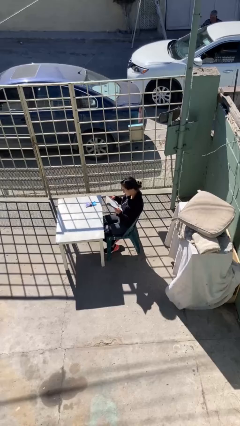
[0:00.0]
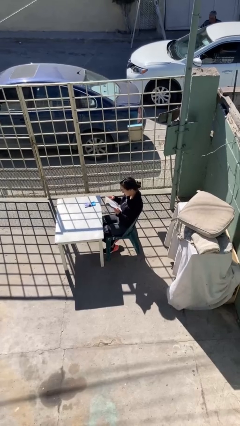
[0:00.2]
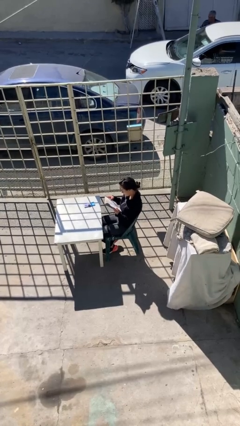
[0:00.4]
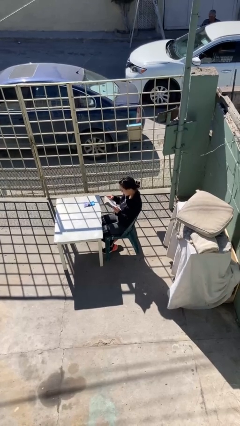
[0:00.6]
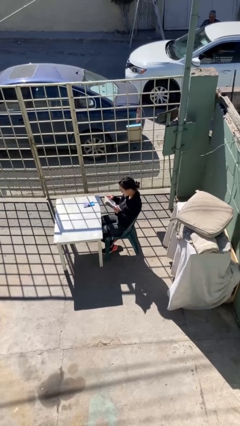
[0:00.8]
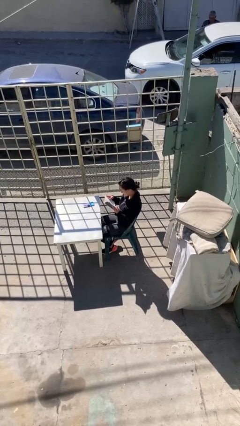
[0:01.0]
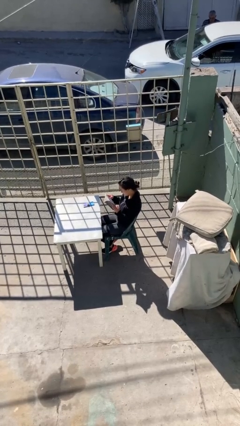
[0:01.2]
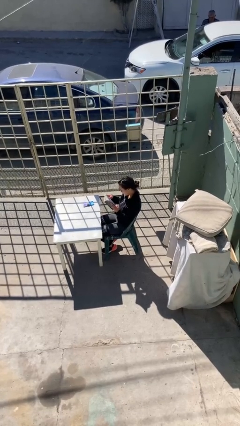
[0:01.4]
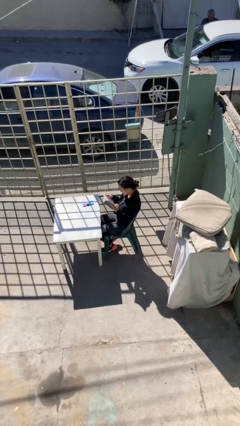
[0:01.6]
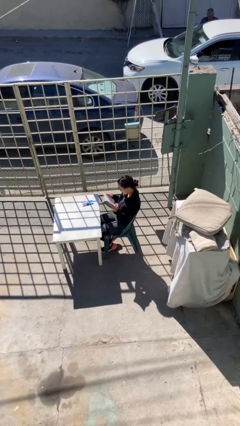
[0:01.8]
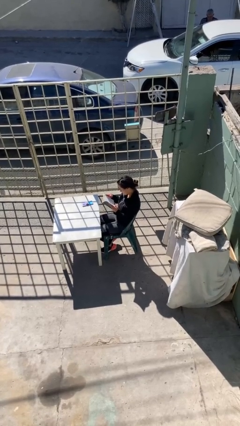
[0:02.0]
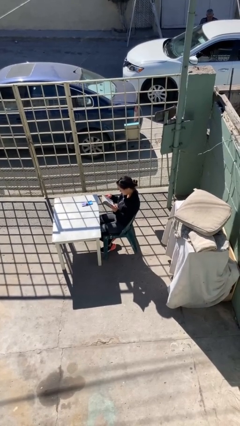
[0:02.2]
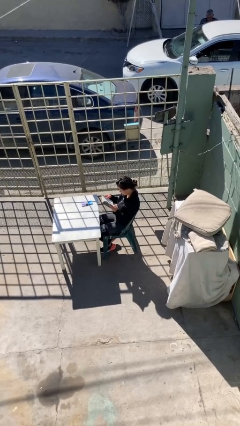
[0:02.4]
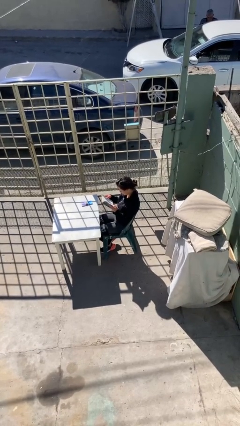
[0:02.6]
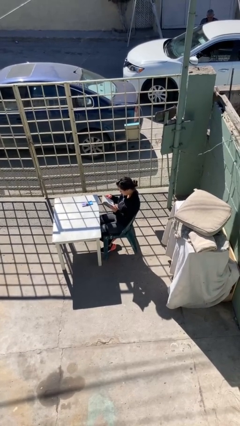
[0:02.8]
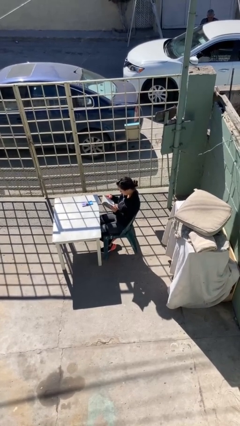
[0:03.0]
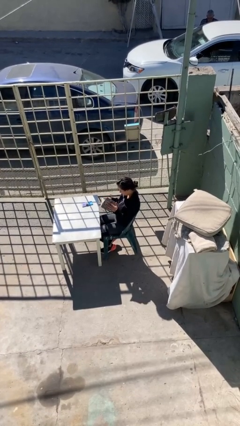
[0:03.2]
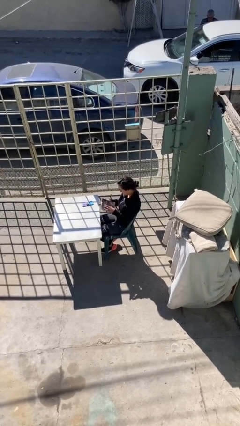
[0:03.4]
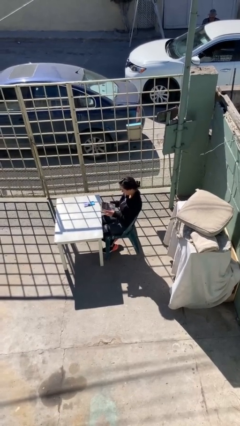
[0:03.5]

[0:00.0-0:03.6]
person reads document

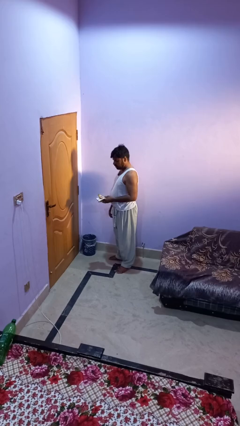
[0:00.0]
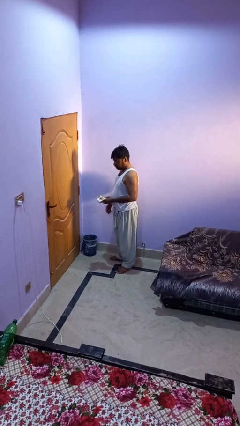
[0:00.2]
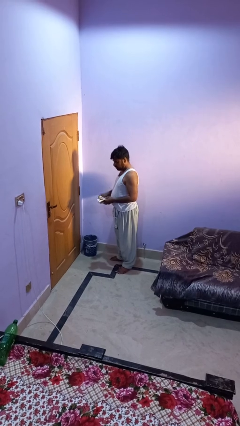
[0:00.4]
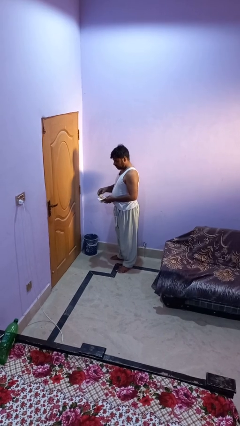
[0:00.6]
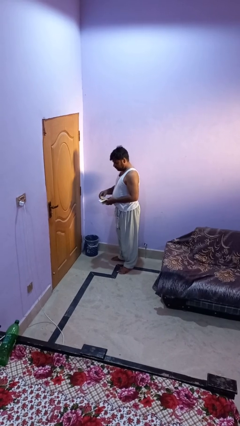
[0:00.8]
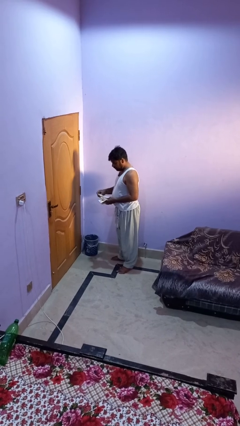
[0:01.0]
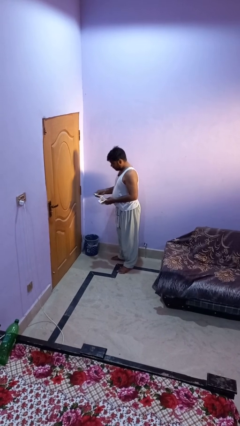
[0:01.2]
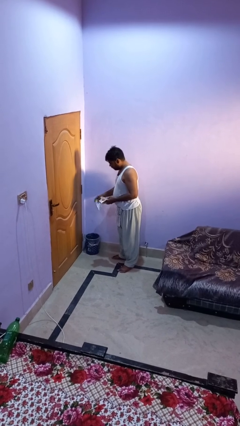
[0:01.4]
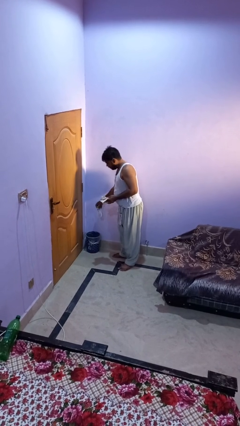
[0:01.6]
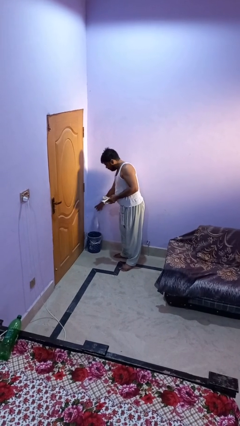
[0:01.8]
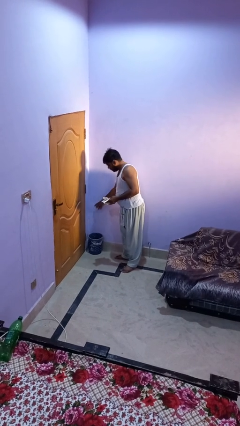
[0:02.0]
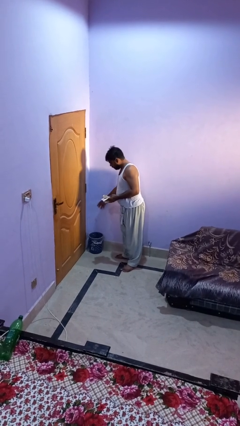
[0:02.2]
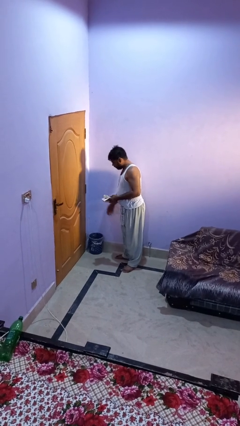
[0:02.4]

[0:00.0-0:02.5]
person discards trash

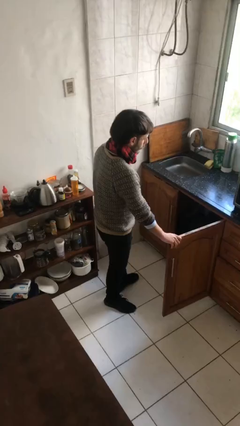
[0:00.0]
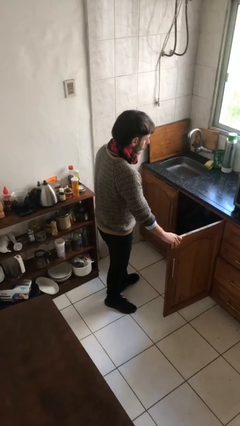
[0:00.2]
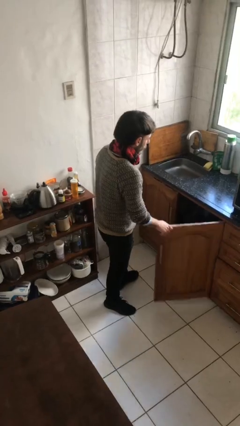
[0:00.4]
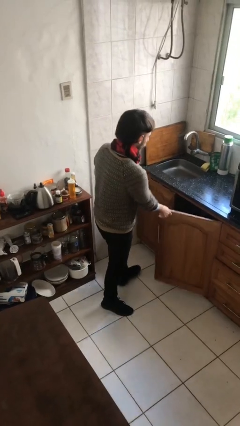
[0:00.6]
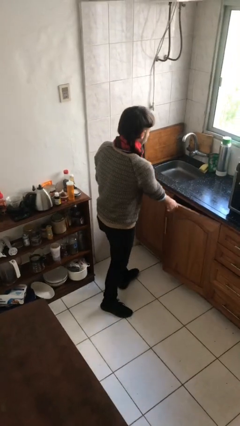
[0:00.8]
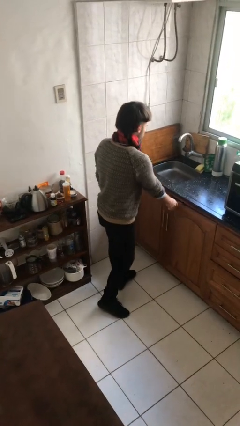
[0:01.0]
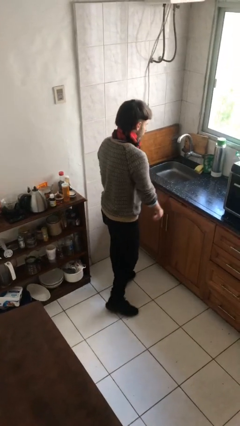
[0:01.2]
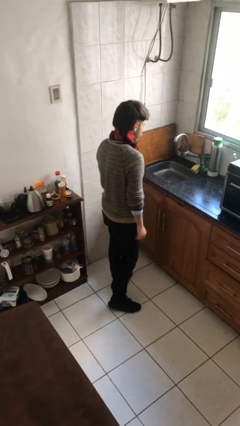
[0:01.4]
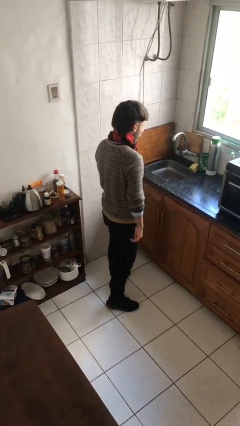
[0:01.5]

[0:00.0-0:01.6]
person closes cabinet

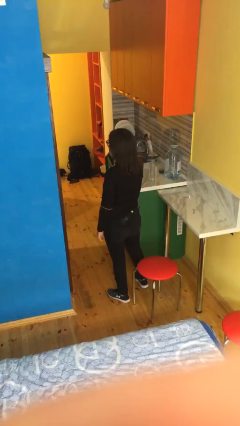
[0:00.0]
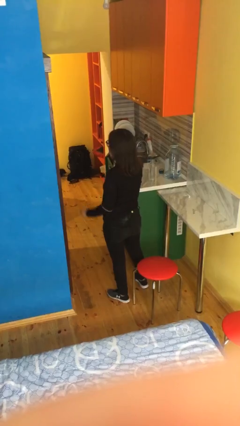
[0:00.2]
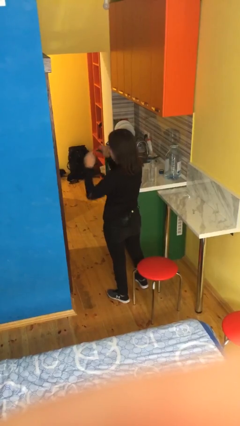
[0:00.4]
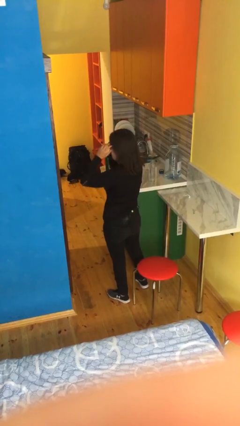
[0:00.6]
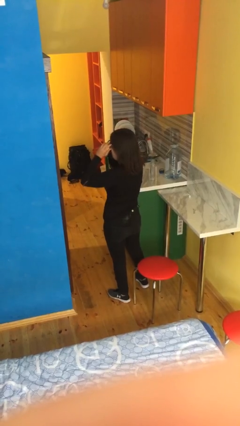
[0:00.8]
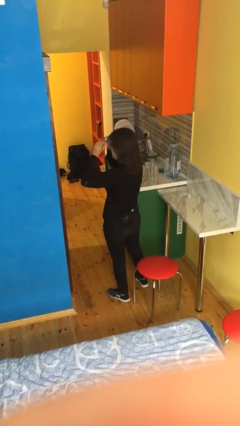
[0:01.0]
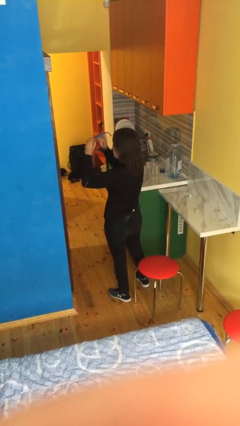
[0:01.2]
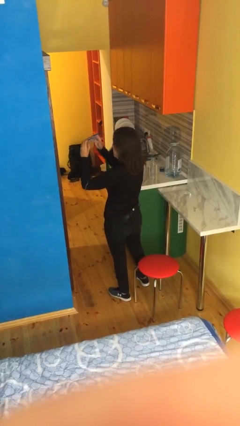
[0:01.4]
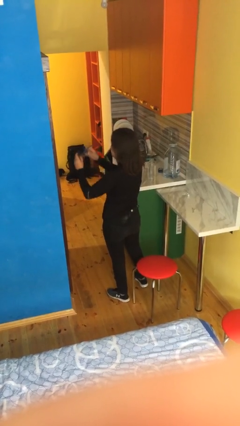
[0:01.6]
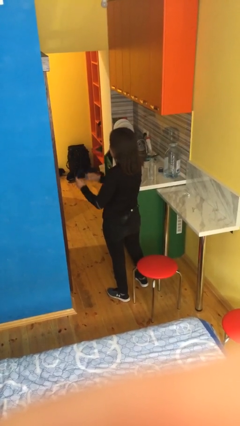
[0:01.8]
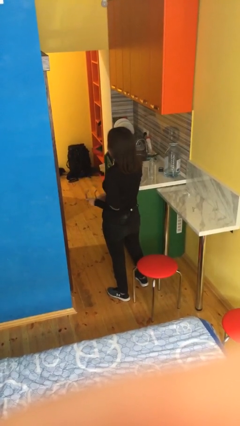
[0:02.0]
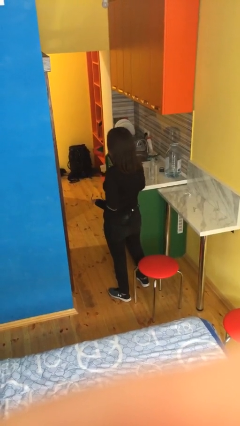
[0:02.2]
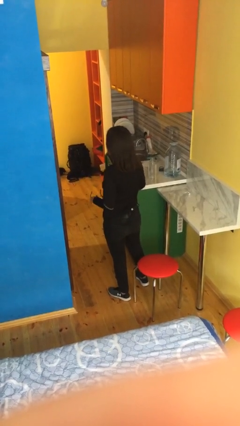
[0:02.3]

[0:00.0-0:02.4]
person takes off glasses

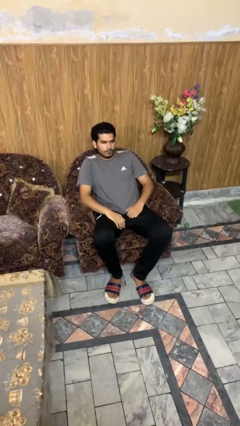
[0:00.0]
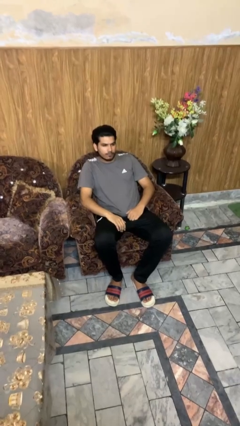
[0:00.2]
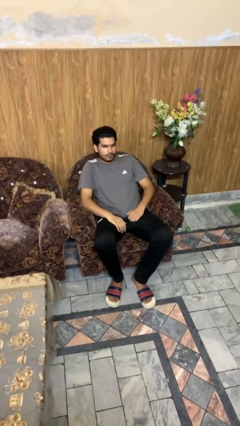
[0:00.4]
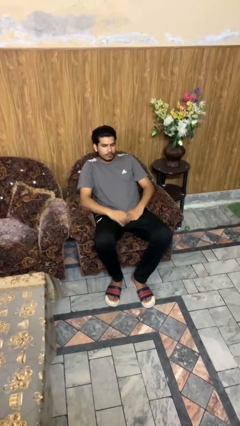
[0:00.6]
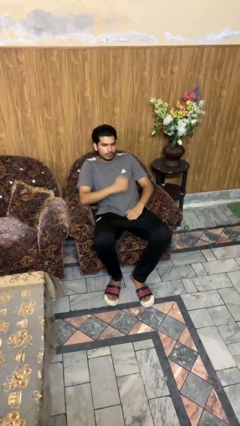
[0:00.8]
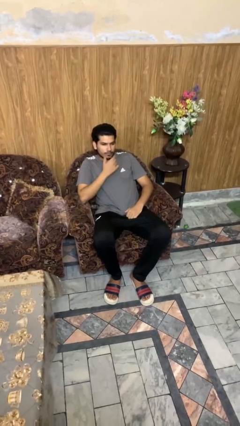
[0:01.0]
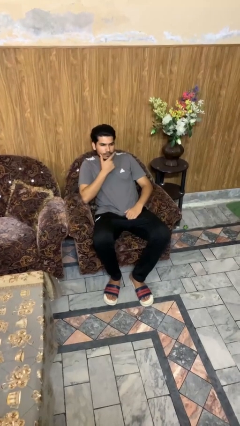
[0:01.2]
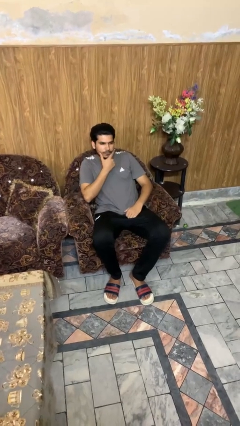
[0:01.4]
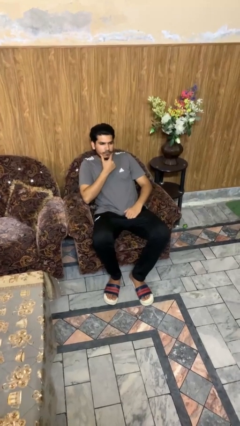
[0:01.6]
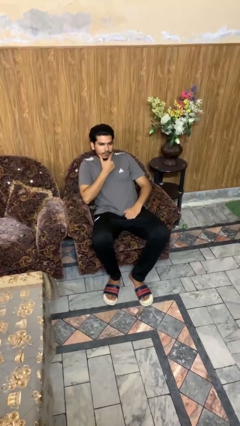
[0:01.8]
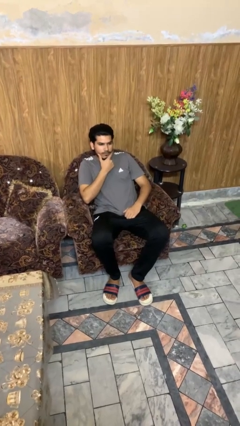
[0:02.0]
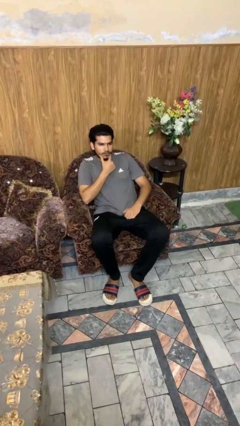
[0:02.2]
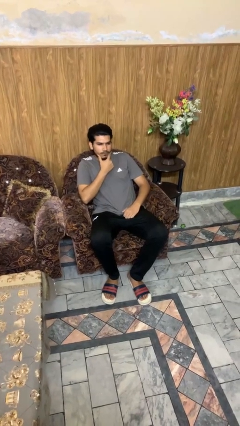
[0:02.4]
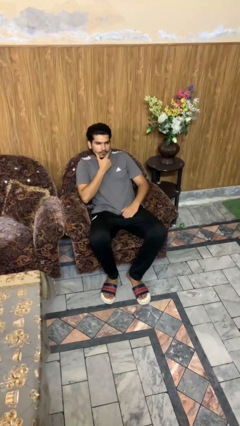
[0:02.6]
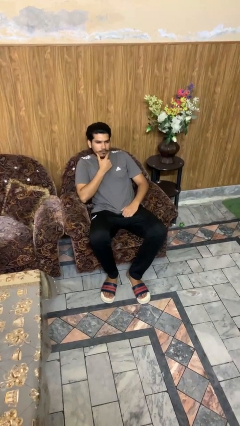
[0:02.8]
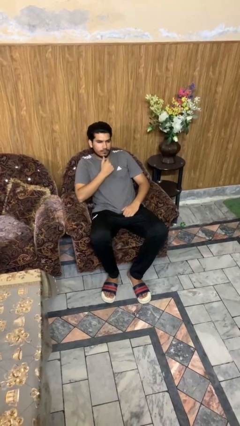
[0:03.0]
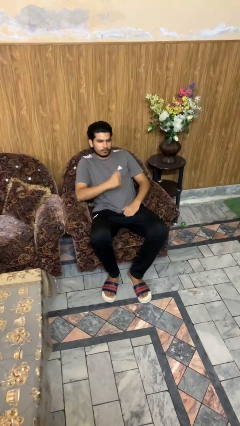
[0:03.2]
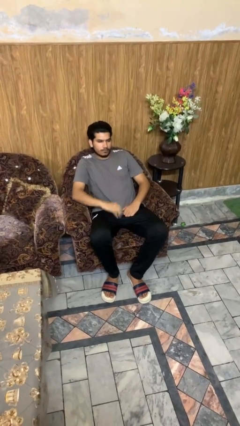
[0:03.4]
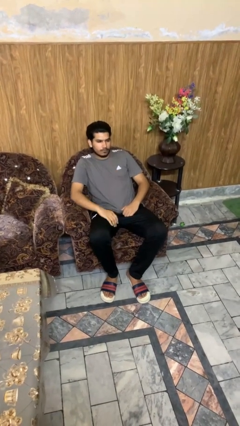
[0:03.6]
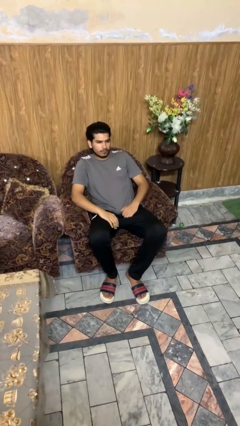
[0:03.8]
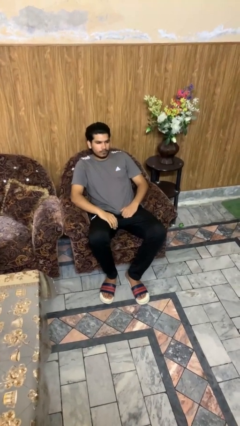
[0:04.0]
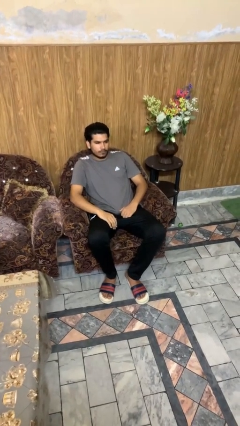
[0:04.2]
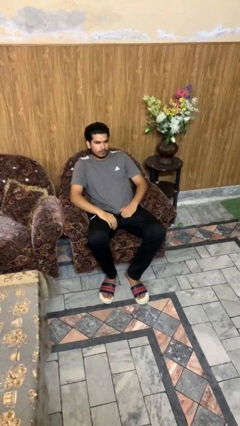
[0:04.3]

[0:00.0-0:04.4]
person strokes chin

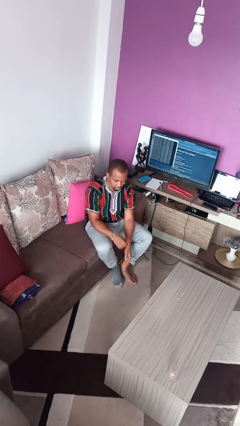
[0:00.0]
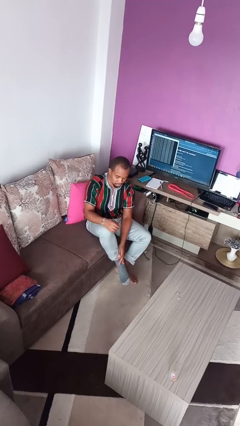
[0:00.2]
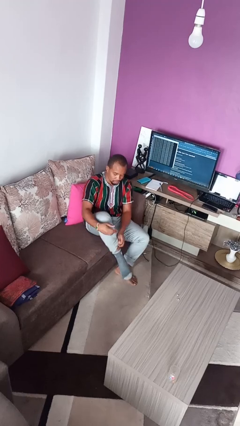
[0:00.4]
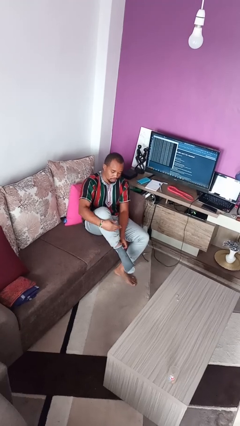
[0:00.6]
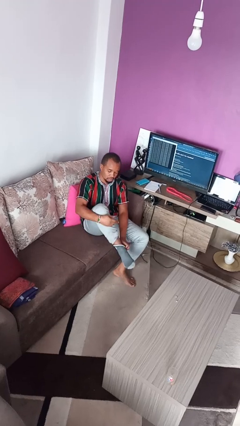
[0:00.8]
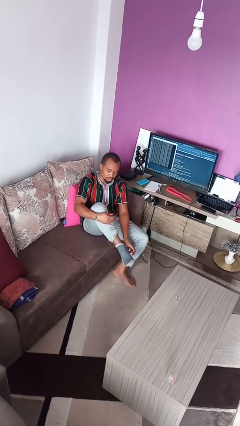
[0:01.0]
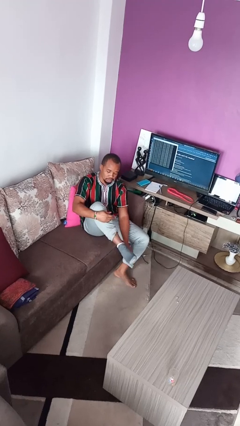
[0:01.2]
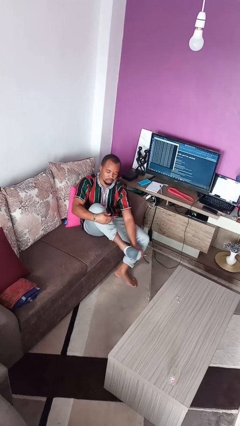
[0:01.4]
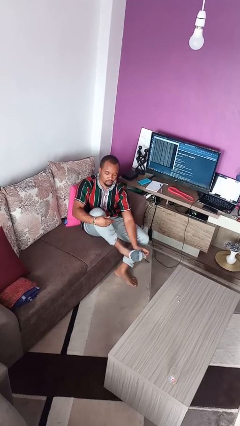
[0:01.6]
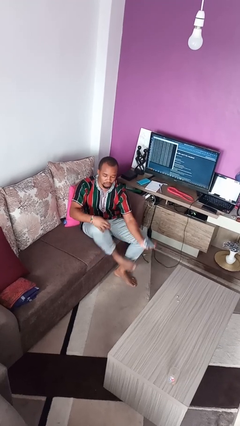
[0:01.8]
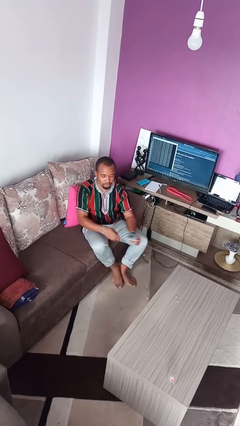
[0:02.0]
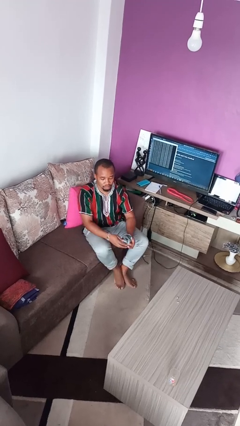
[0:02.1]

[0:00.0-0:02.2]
person takes off socks

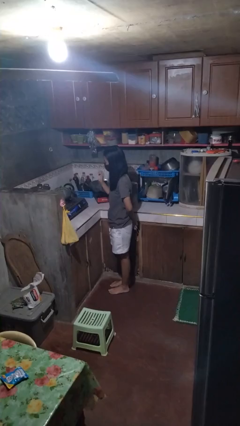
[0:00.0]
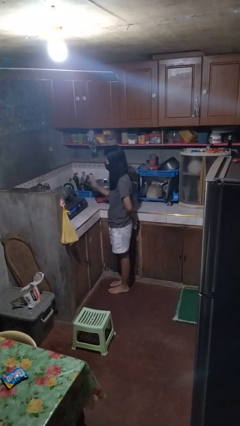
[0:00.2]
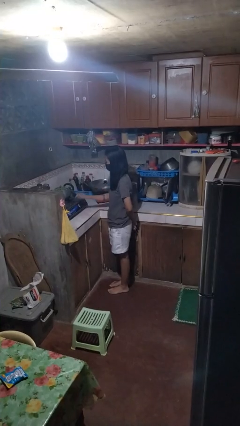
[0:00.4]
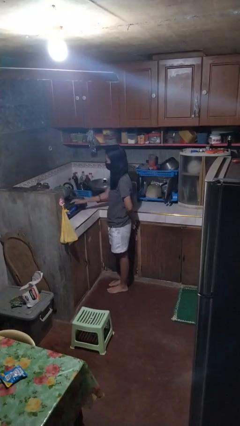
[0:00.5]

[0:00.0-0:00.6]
person burns hand
